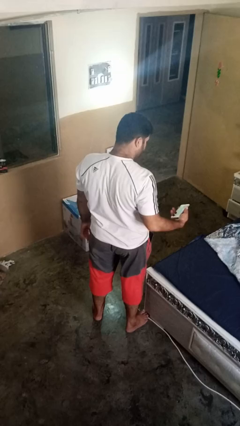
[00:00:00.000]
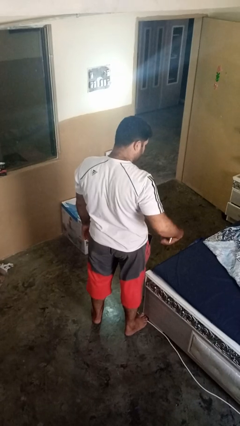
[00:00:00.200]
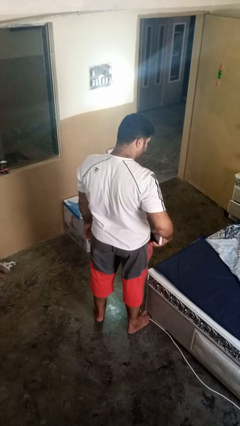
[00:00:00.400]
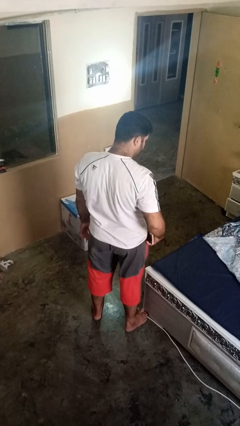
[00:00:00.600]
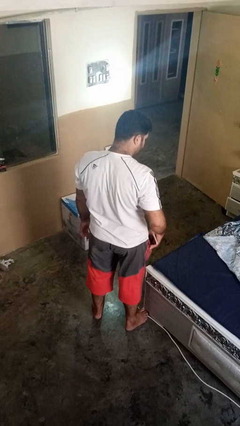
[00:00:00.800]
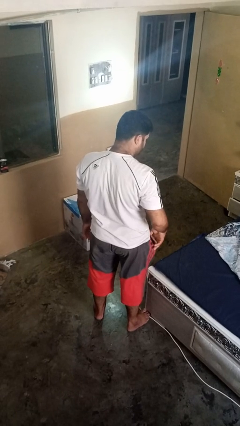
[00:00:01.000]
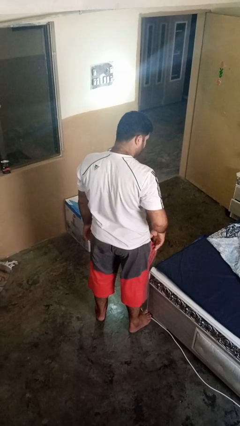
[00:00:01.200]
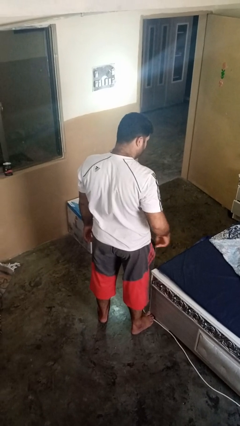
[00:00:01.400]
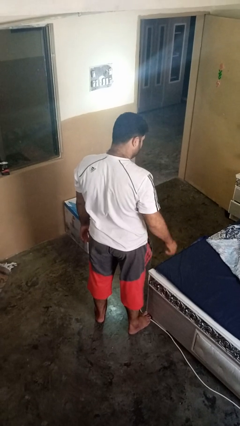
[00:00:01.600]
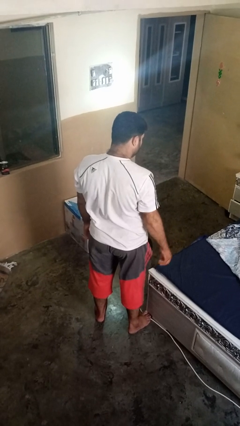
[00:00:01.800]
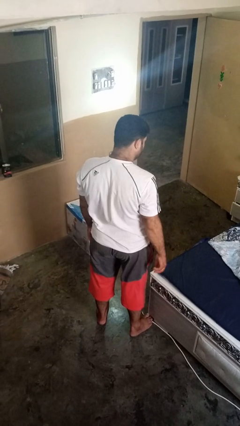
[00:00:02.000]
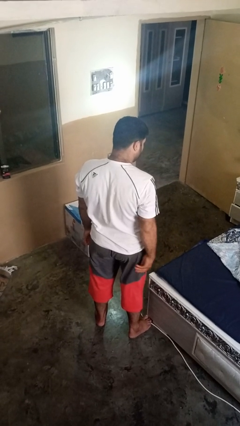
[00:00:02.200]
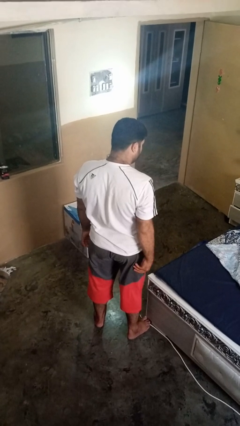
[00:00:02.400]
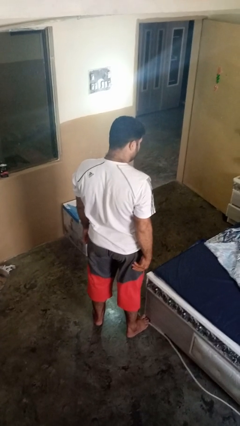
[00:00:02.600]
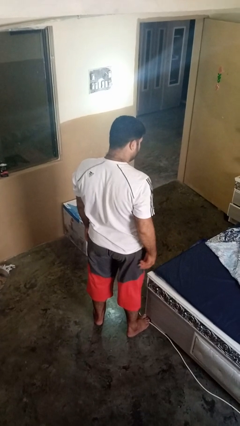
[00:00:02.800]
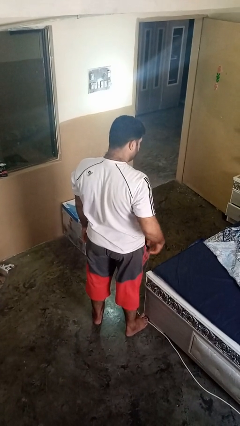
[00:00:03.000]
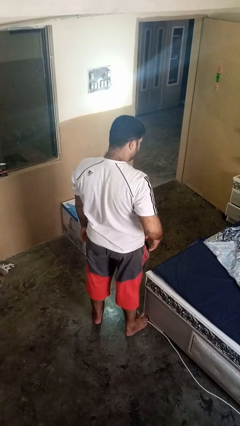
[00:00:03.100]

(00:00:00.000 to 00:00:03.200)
person puts phone into pocket

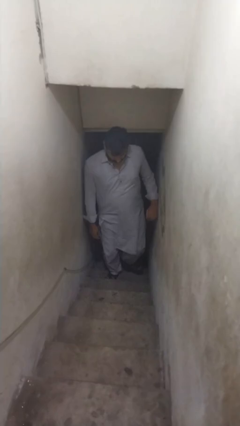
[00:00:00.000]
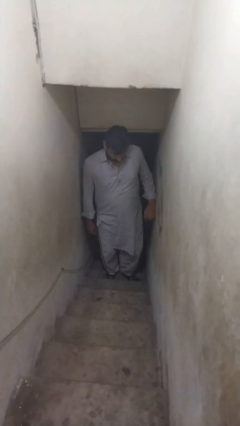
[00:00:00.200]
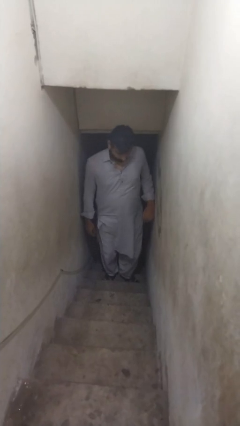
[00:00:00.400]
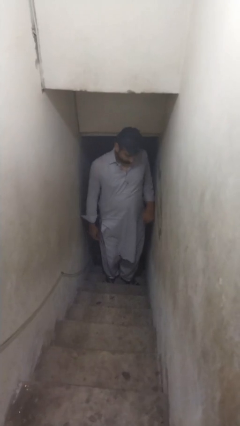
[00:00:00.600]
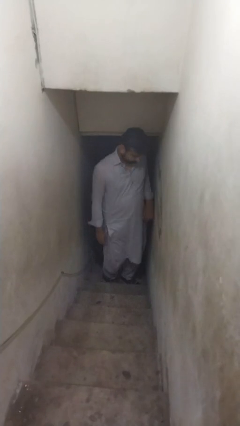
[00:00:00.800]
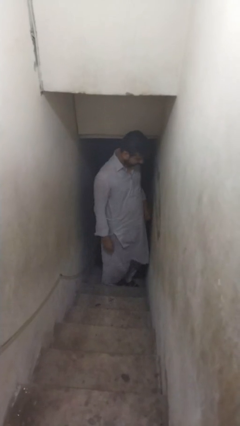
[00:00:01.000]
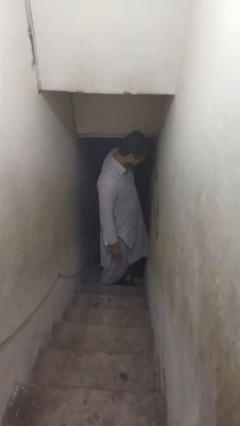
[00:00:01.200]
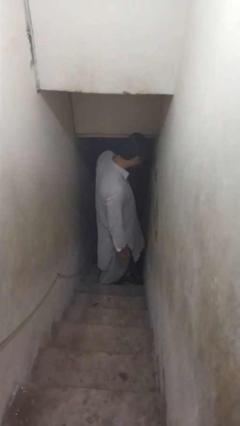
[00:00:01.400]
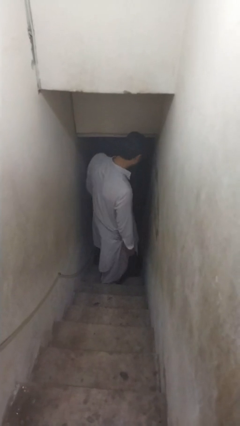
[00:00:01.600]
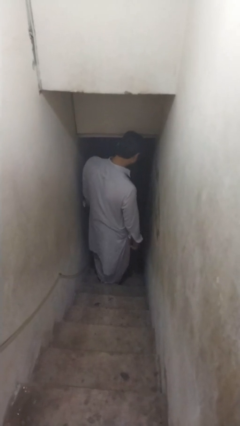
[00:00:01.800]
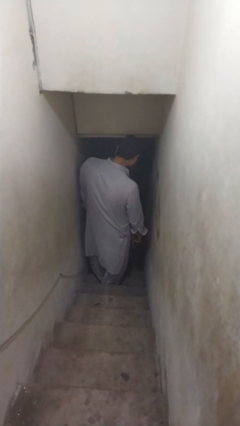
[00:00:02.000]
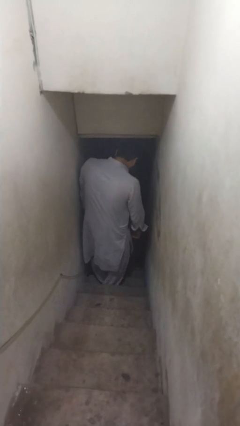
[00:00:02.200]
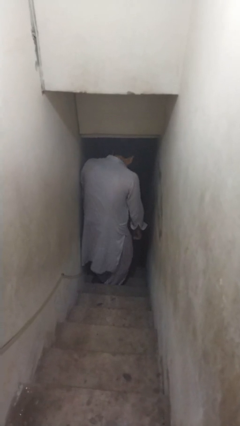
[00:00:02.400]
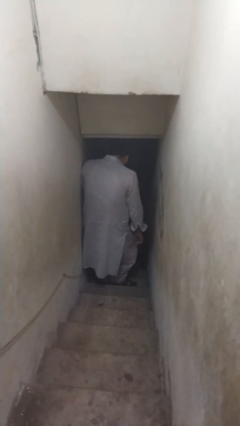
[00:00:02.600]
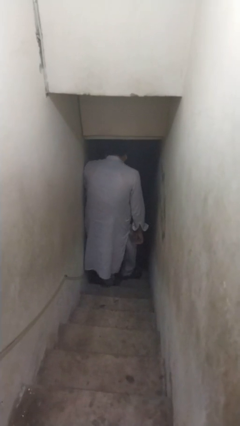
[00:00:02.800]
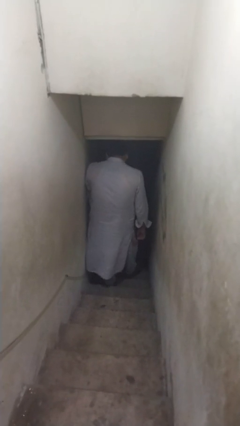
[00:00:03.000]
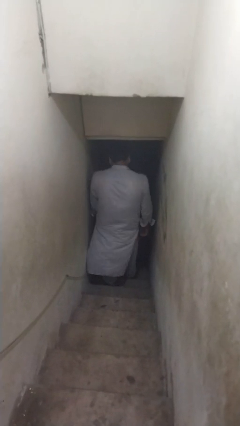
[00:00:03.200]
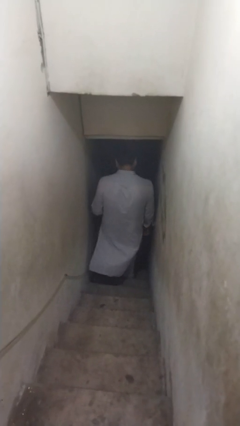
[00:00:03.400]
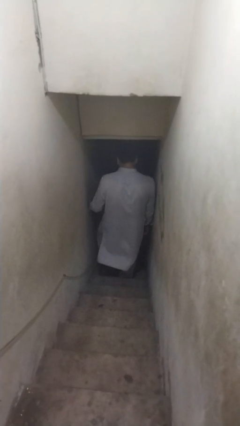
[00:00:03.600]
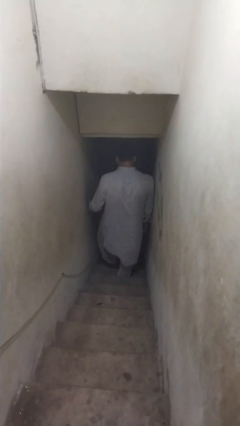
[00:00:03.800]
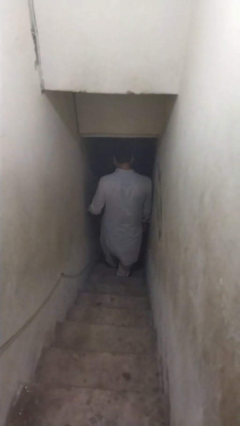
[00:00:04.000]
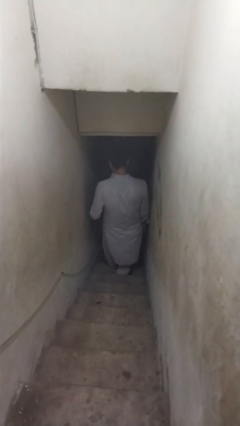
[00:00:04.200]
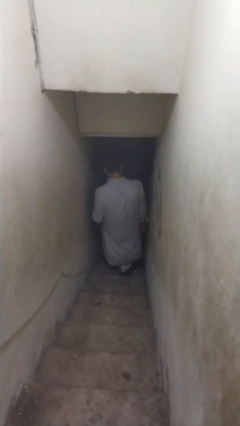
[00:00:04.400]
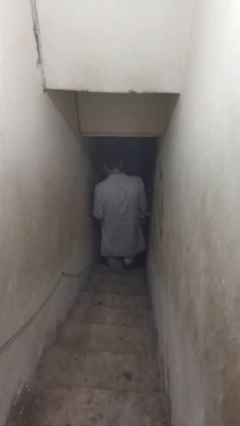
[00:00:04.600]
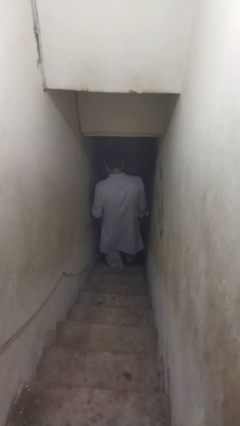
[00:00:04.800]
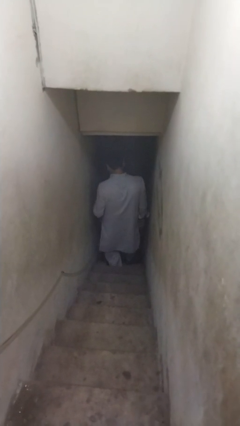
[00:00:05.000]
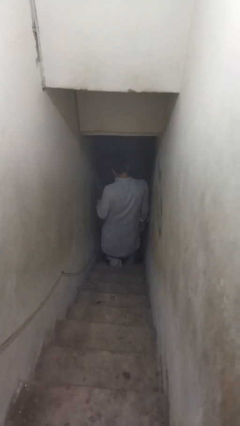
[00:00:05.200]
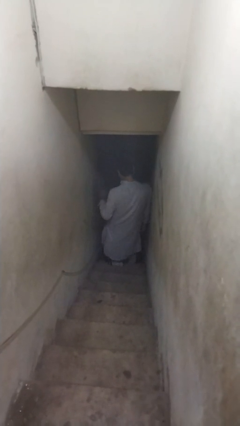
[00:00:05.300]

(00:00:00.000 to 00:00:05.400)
person climbs down stairs

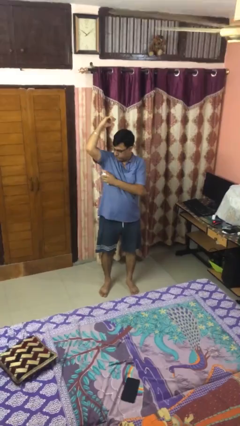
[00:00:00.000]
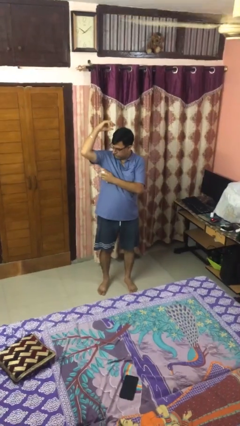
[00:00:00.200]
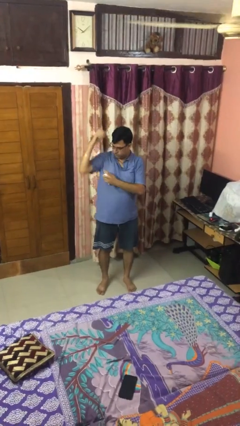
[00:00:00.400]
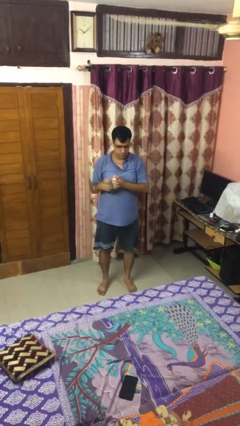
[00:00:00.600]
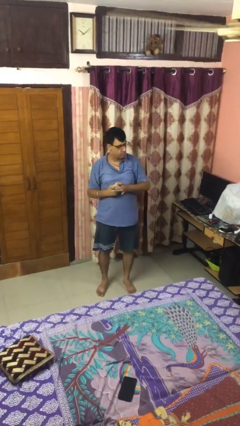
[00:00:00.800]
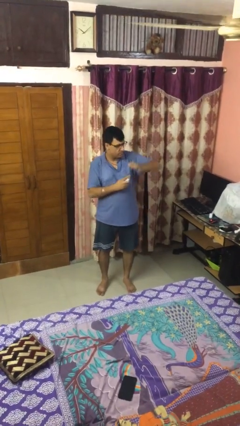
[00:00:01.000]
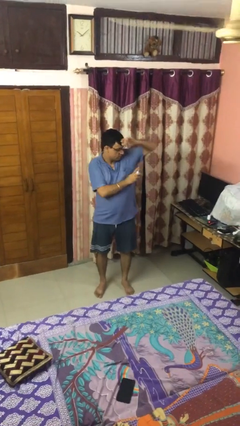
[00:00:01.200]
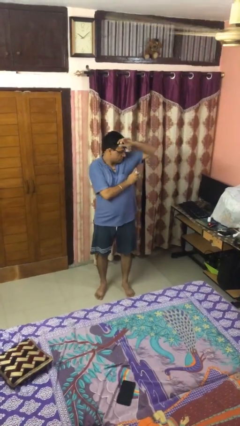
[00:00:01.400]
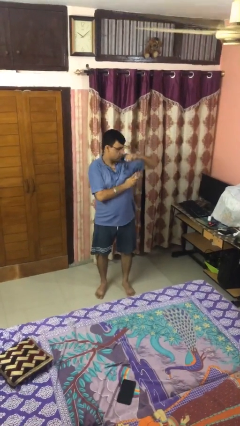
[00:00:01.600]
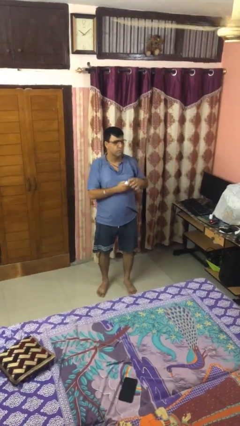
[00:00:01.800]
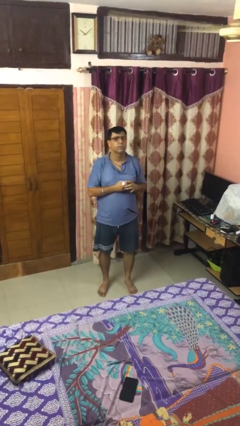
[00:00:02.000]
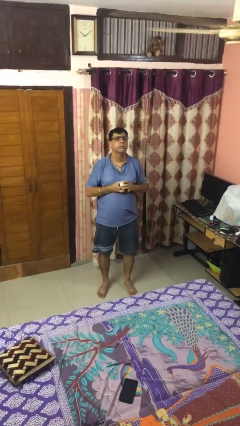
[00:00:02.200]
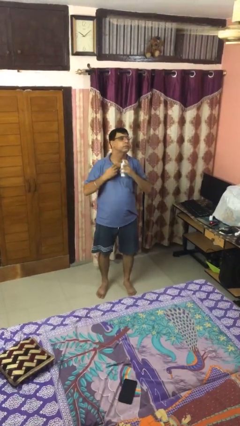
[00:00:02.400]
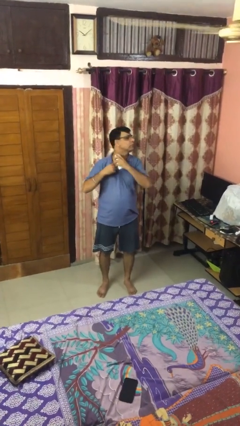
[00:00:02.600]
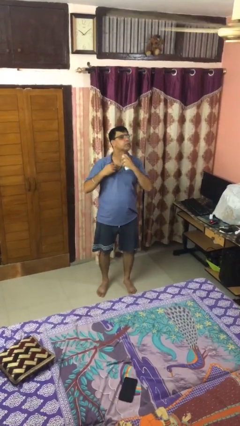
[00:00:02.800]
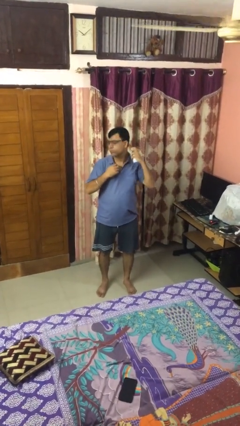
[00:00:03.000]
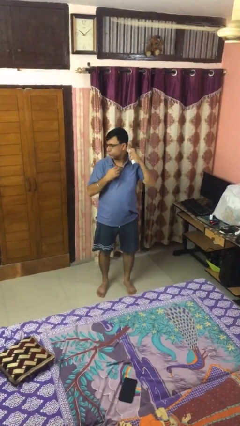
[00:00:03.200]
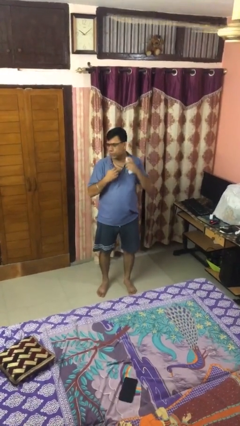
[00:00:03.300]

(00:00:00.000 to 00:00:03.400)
person applies deodorant

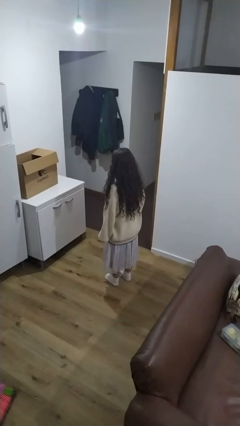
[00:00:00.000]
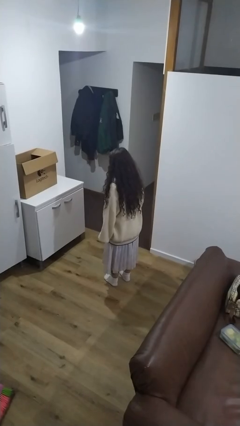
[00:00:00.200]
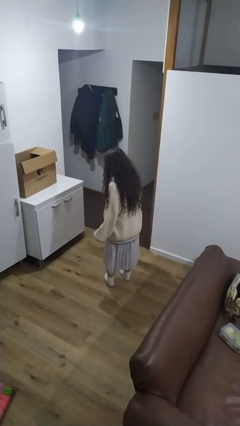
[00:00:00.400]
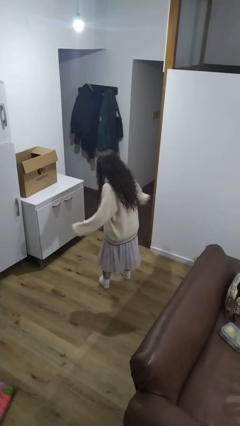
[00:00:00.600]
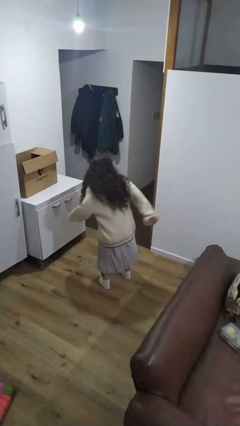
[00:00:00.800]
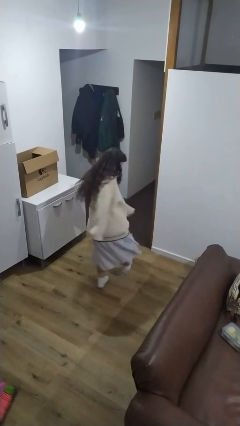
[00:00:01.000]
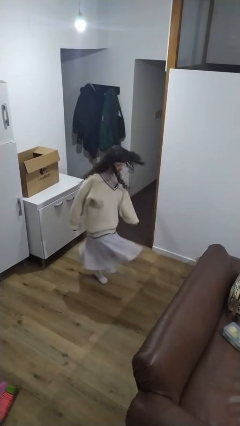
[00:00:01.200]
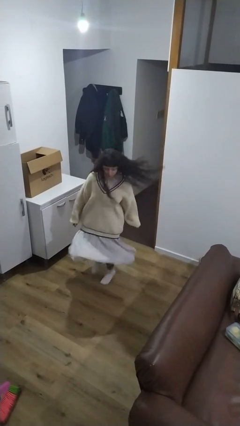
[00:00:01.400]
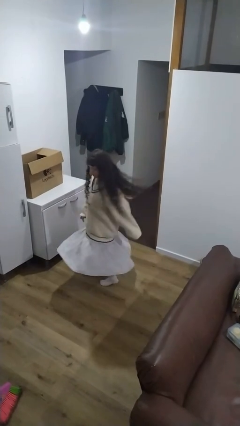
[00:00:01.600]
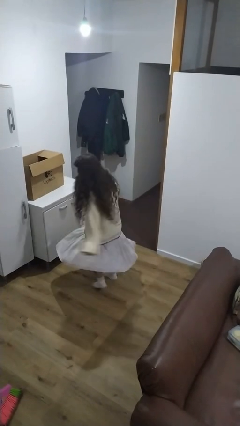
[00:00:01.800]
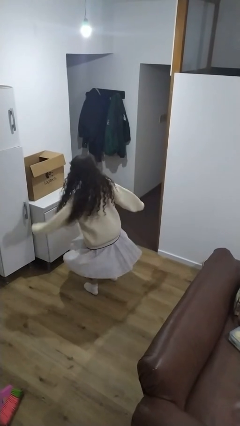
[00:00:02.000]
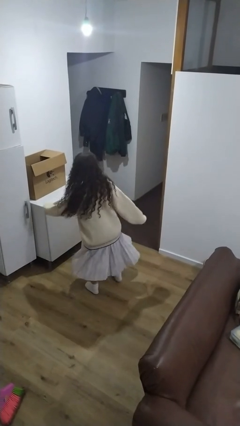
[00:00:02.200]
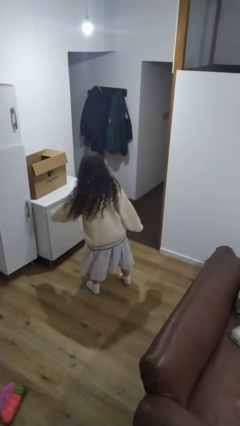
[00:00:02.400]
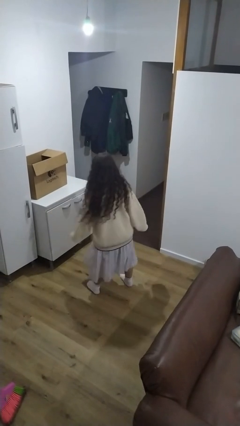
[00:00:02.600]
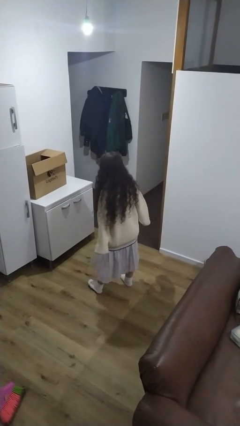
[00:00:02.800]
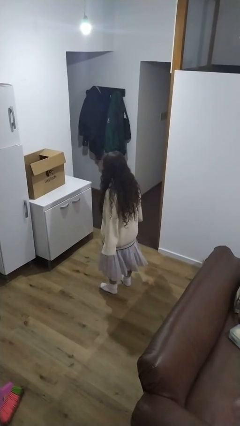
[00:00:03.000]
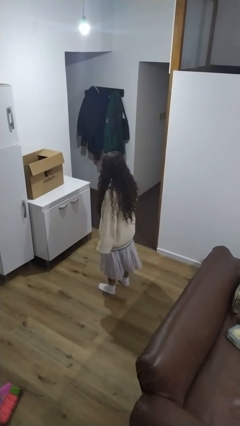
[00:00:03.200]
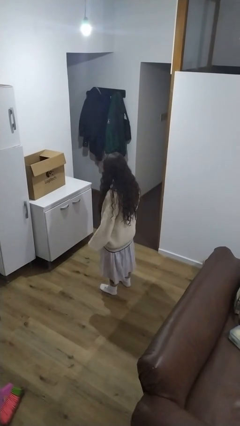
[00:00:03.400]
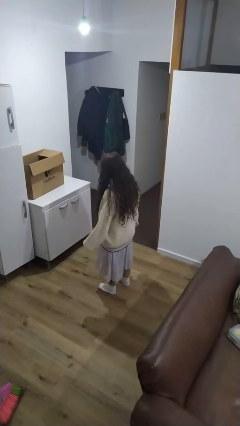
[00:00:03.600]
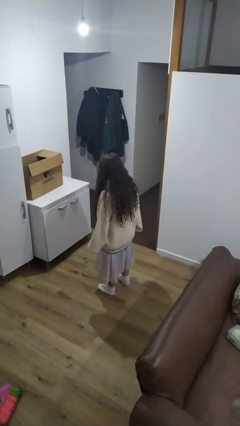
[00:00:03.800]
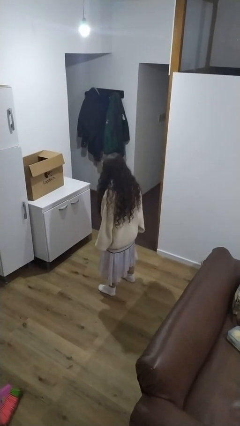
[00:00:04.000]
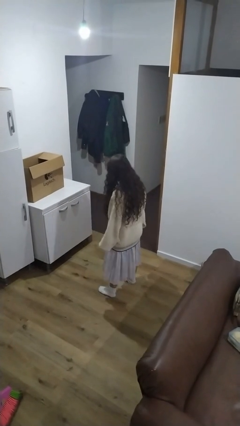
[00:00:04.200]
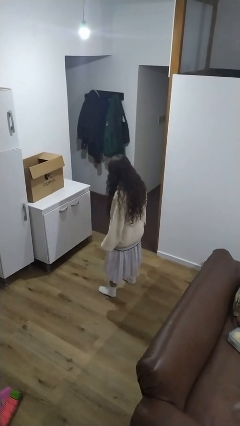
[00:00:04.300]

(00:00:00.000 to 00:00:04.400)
person twirls

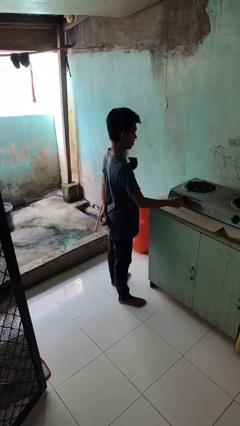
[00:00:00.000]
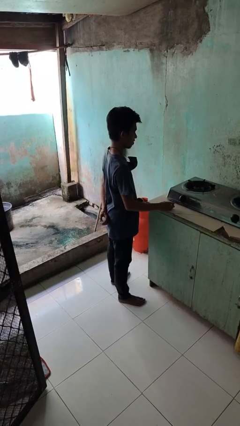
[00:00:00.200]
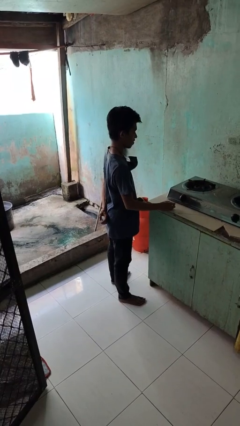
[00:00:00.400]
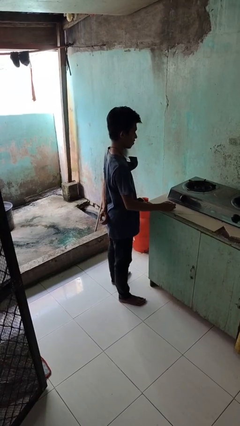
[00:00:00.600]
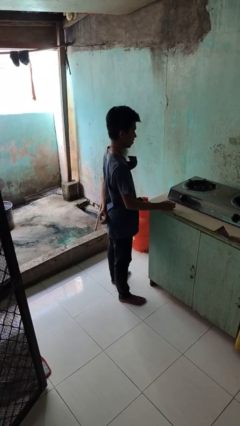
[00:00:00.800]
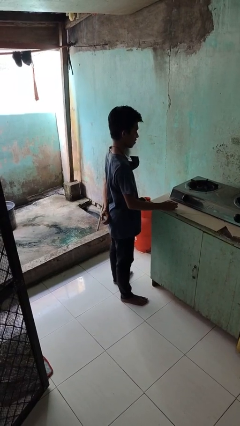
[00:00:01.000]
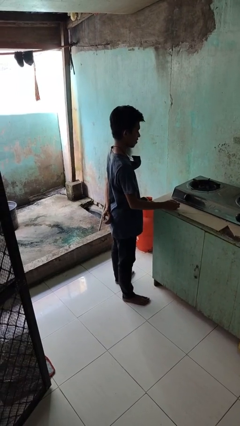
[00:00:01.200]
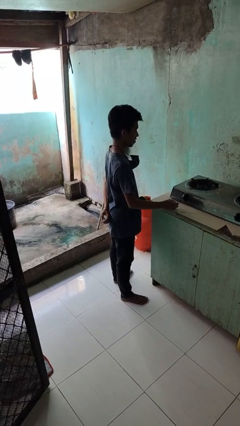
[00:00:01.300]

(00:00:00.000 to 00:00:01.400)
person turns off stovetop
